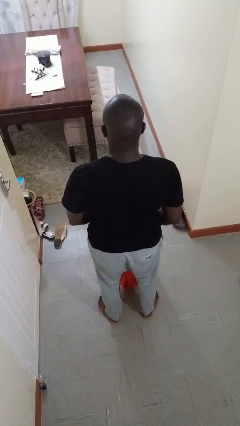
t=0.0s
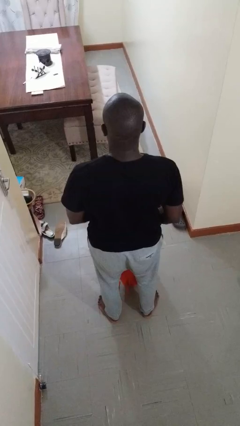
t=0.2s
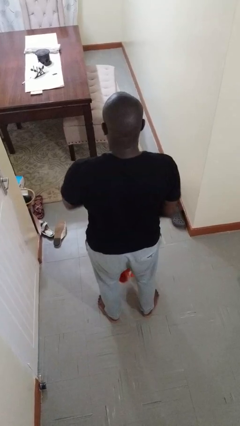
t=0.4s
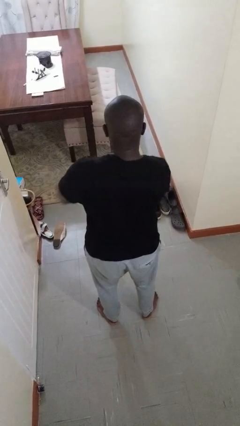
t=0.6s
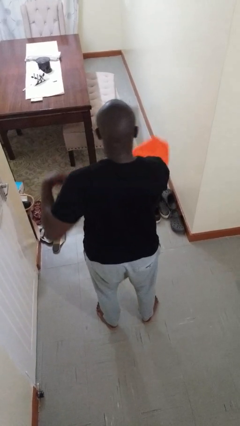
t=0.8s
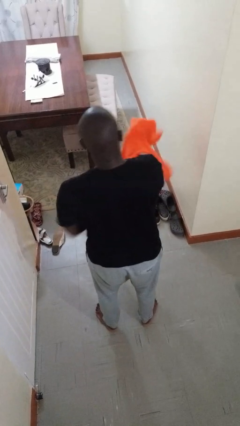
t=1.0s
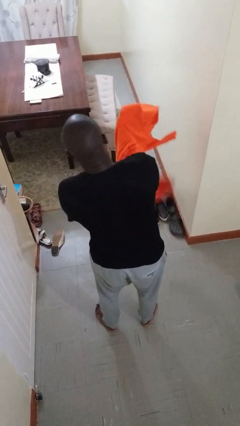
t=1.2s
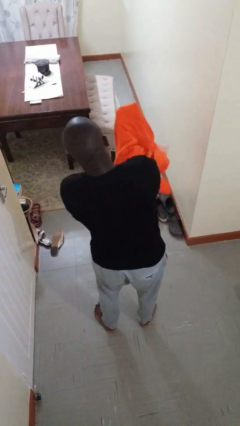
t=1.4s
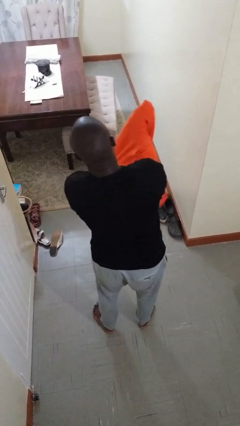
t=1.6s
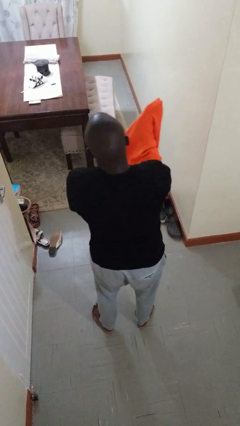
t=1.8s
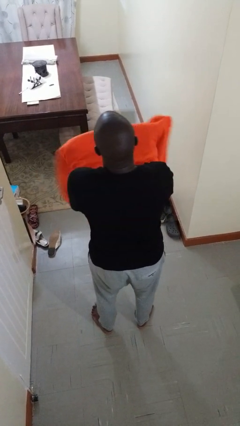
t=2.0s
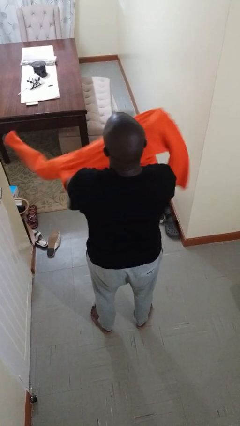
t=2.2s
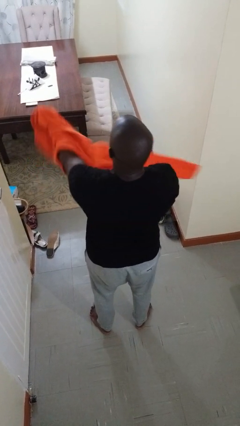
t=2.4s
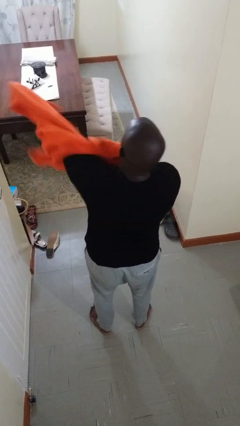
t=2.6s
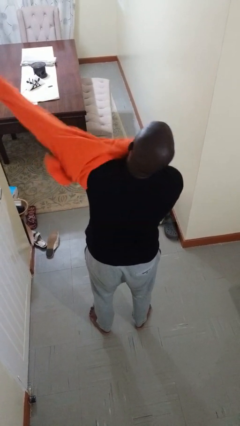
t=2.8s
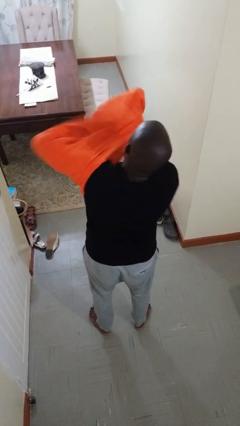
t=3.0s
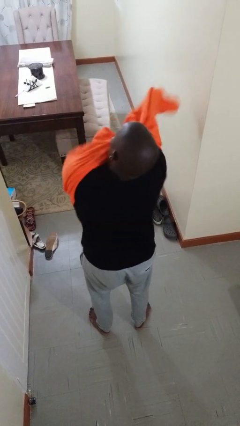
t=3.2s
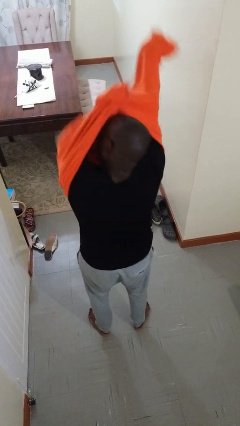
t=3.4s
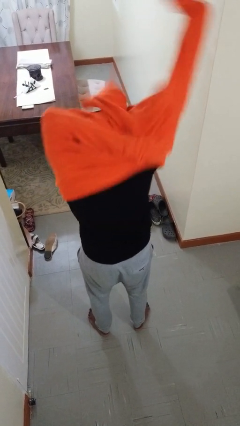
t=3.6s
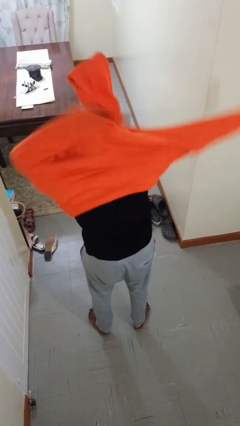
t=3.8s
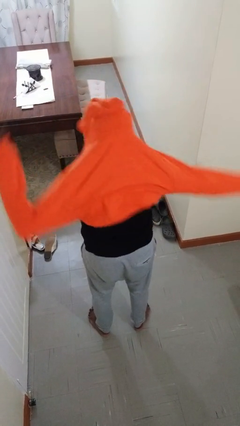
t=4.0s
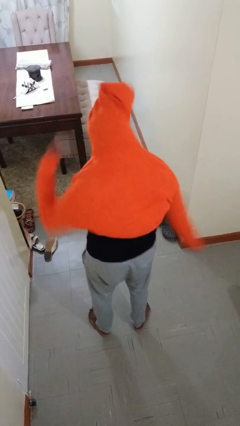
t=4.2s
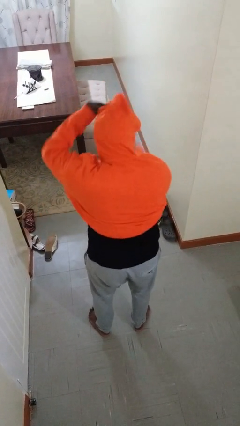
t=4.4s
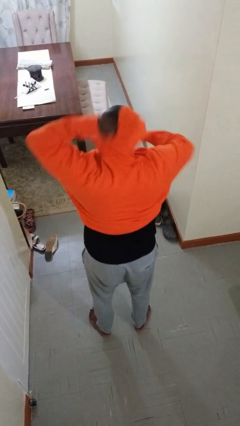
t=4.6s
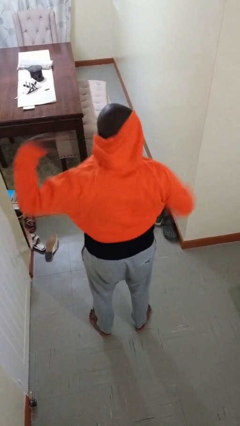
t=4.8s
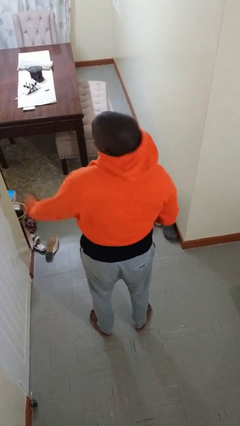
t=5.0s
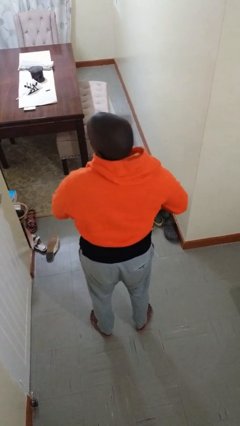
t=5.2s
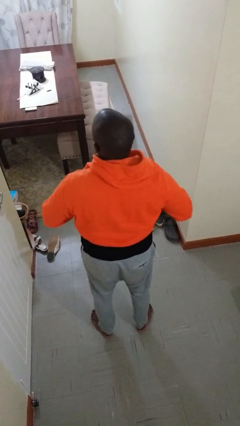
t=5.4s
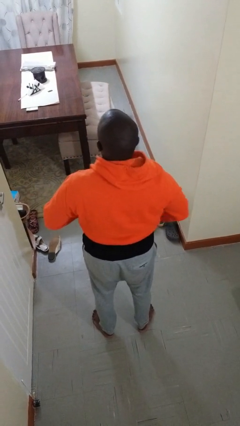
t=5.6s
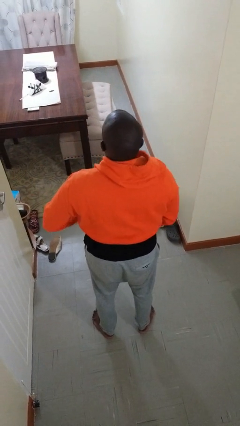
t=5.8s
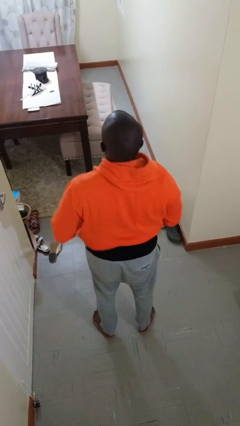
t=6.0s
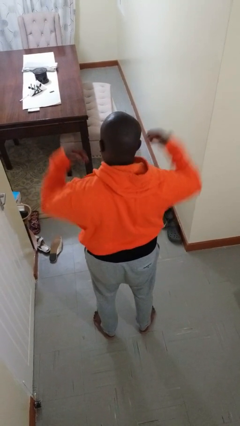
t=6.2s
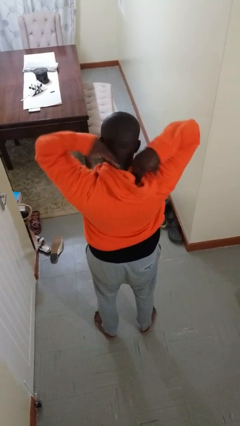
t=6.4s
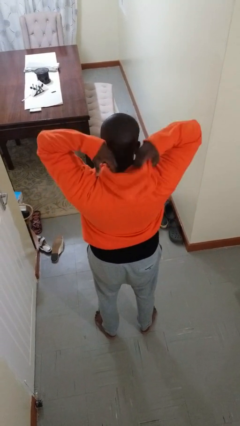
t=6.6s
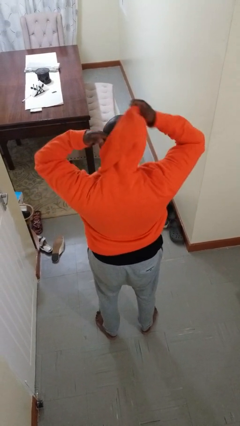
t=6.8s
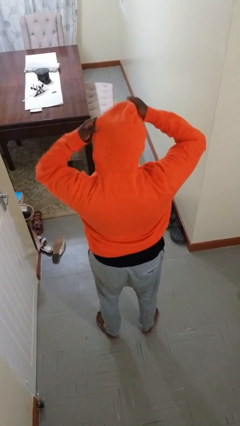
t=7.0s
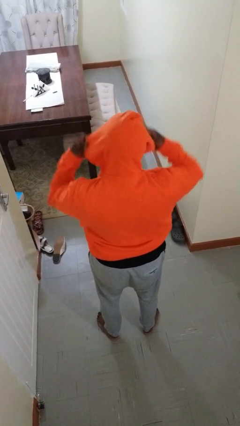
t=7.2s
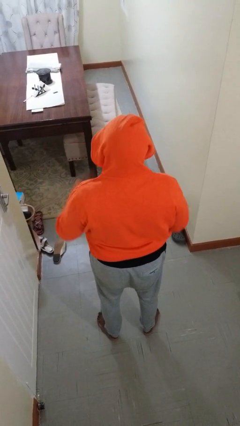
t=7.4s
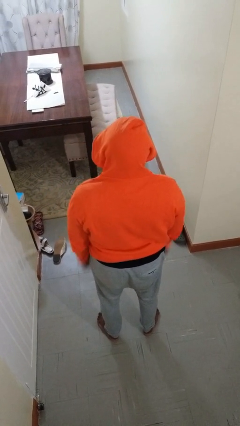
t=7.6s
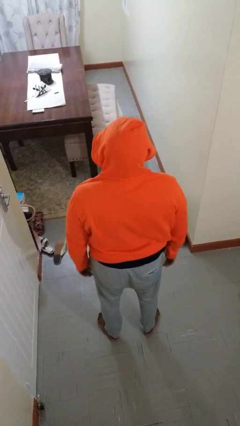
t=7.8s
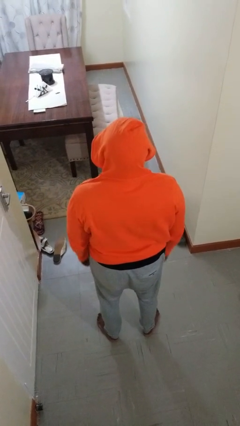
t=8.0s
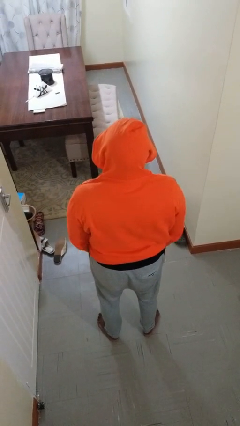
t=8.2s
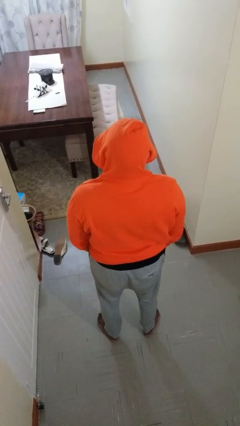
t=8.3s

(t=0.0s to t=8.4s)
person puts on hoodie

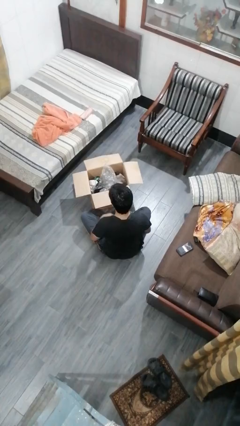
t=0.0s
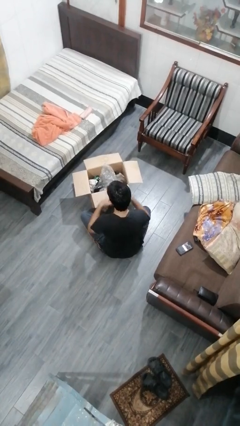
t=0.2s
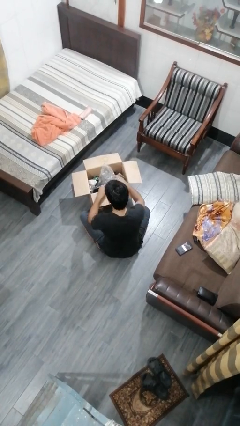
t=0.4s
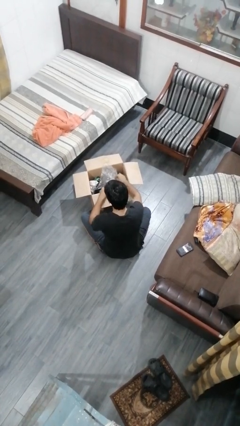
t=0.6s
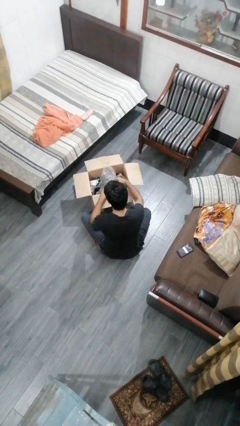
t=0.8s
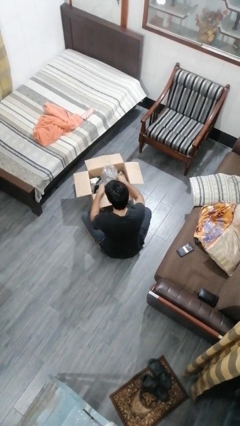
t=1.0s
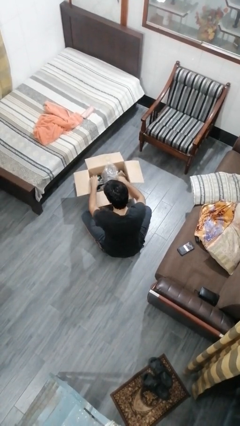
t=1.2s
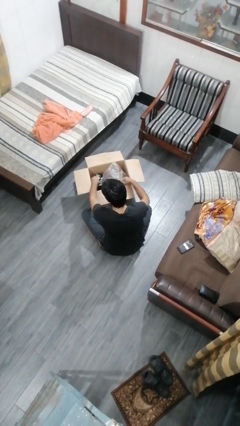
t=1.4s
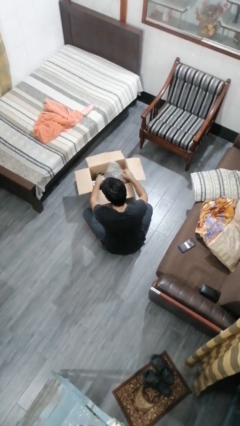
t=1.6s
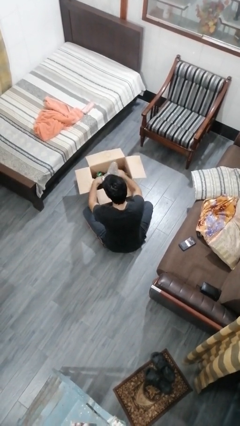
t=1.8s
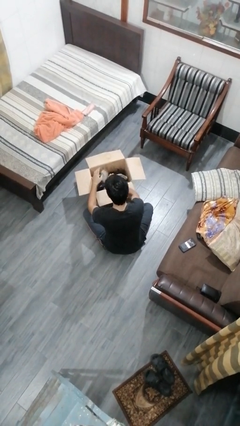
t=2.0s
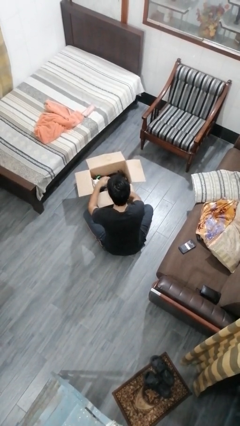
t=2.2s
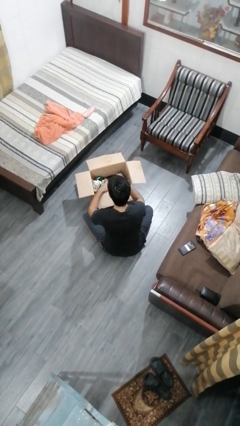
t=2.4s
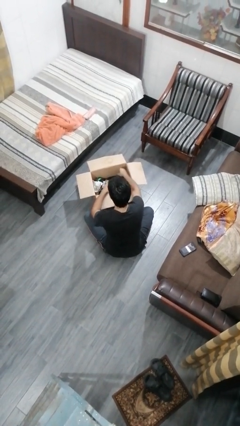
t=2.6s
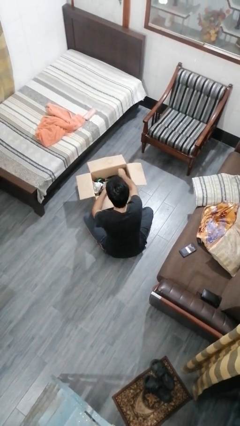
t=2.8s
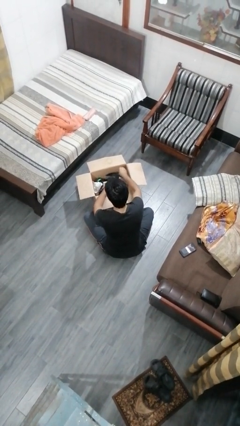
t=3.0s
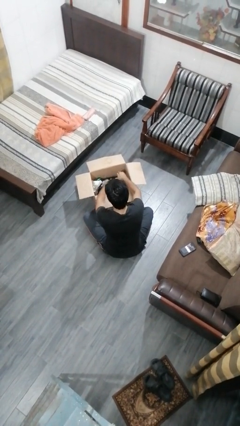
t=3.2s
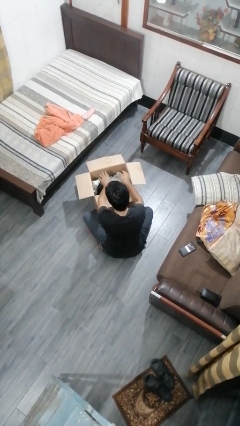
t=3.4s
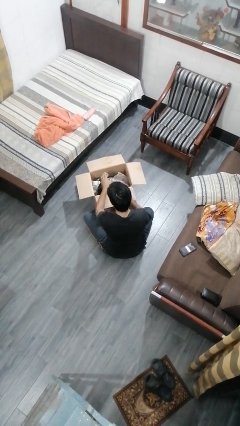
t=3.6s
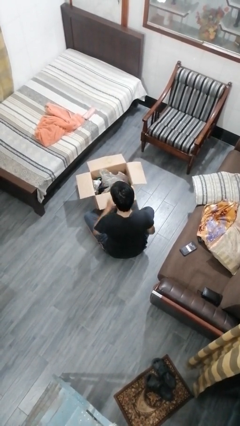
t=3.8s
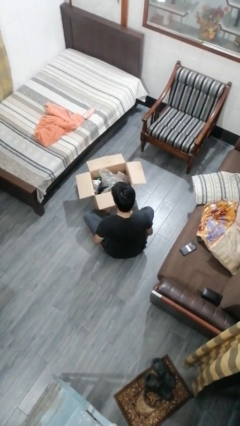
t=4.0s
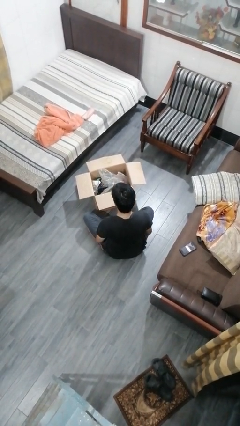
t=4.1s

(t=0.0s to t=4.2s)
person searches in box

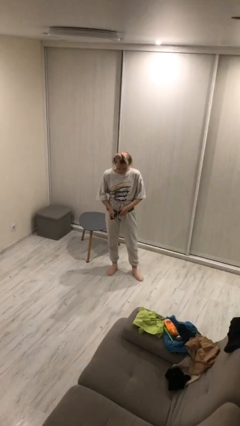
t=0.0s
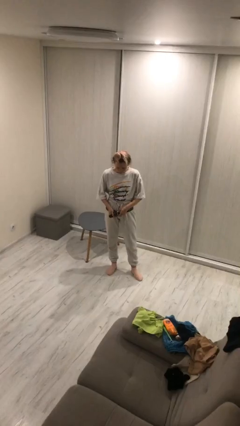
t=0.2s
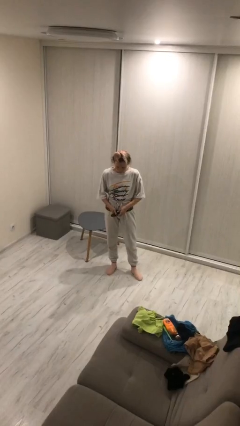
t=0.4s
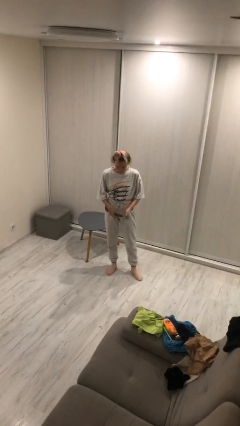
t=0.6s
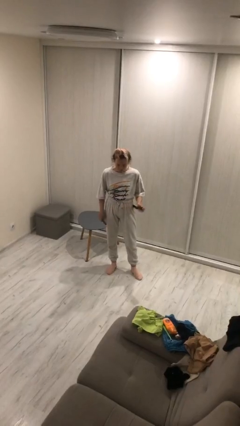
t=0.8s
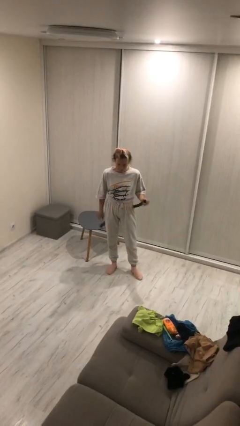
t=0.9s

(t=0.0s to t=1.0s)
person takes off belt

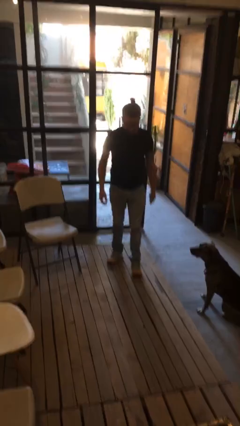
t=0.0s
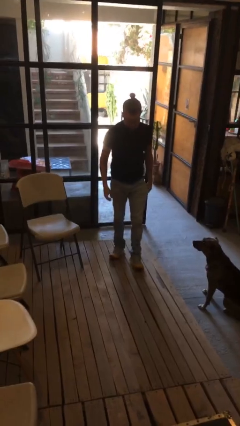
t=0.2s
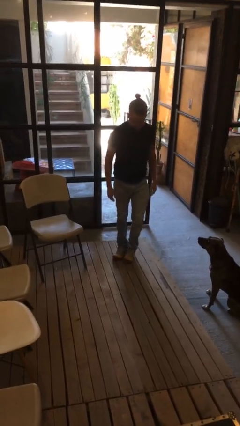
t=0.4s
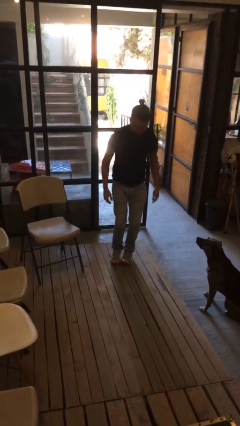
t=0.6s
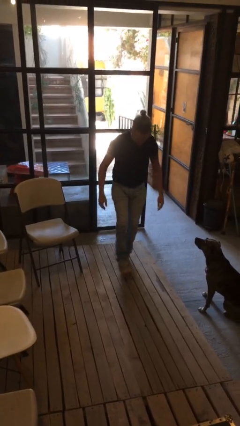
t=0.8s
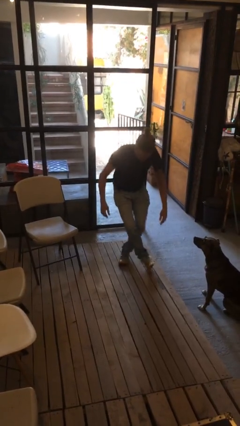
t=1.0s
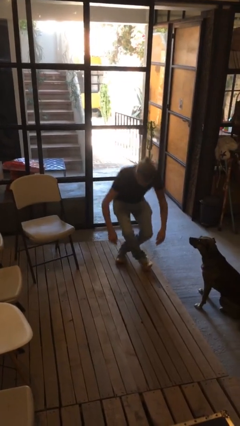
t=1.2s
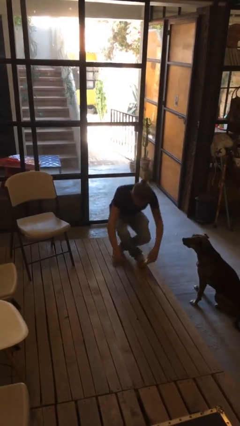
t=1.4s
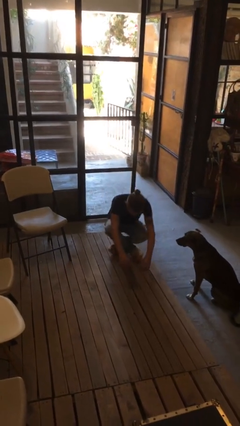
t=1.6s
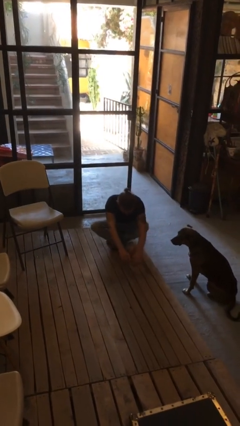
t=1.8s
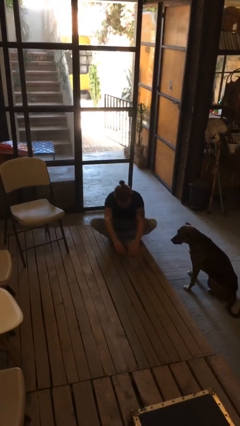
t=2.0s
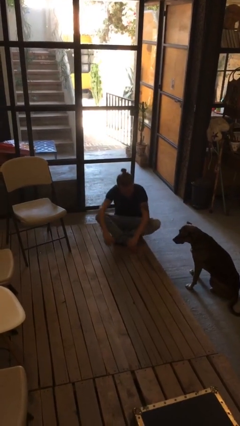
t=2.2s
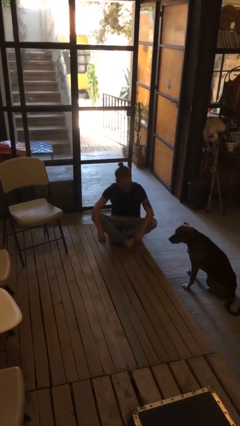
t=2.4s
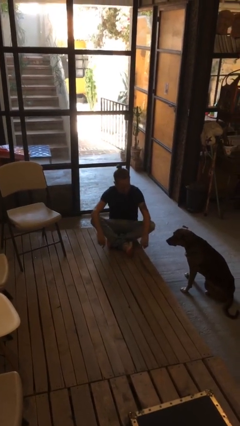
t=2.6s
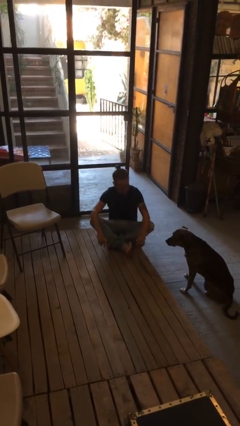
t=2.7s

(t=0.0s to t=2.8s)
person sits crisscross

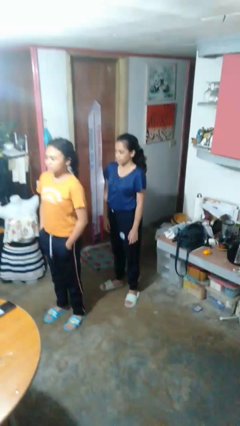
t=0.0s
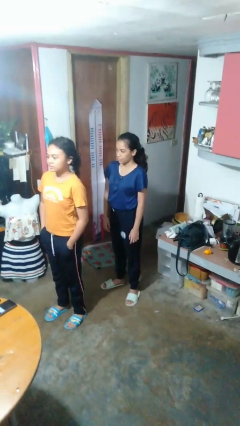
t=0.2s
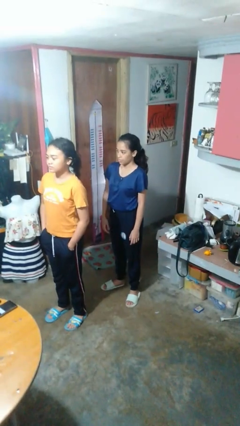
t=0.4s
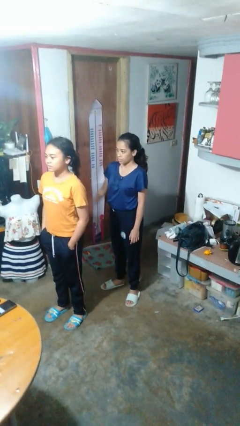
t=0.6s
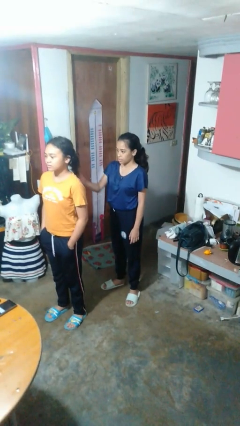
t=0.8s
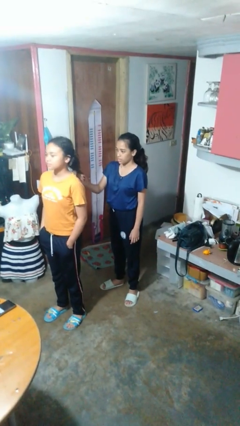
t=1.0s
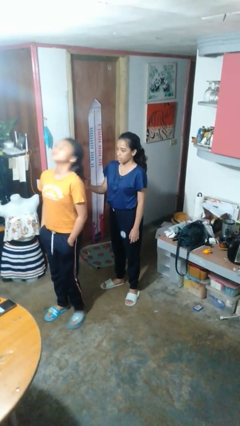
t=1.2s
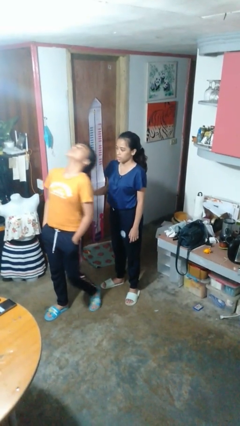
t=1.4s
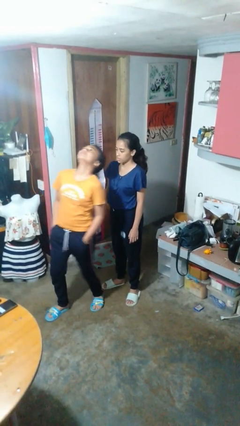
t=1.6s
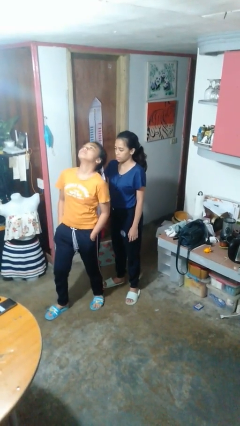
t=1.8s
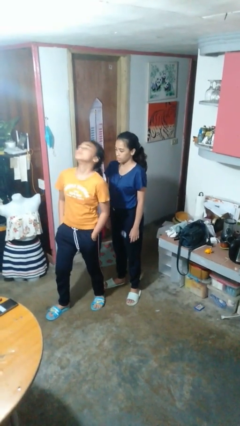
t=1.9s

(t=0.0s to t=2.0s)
person grabs person by hair
